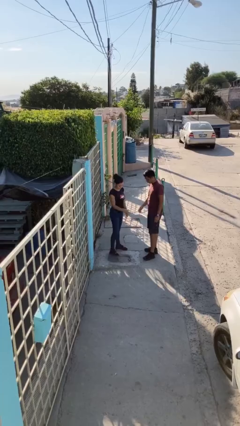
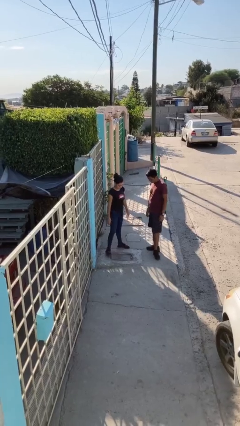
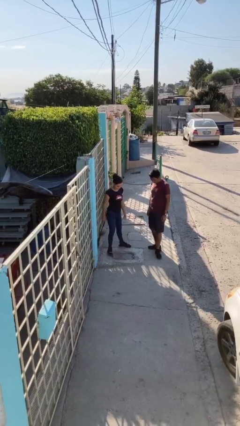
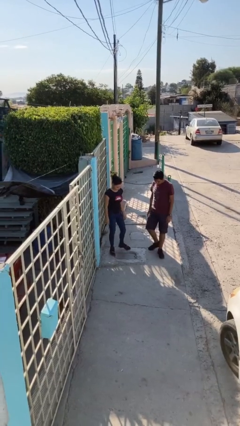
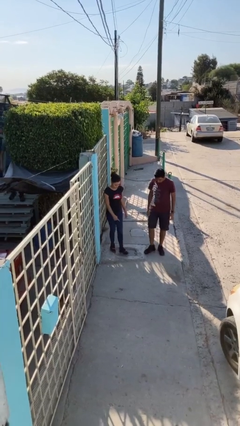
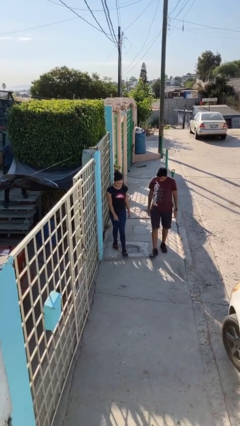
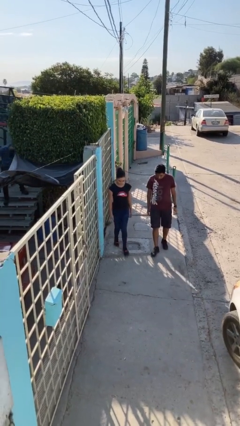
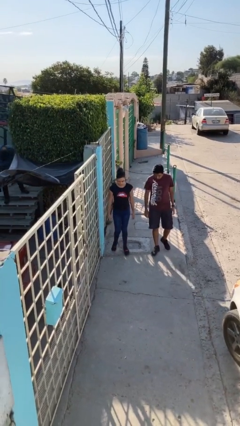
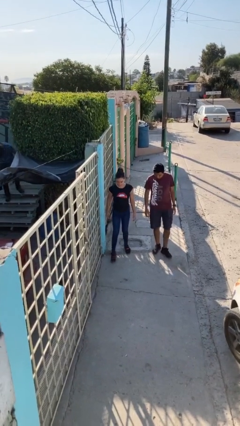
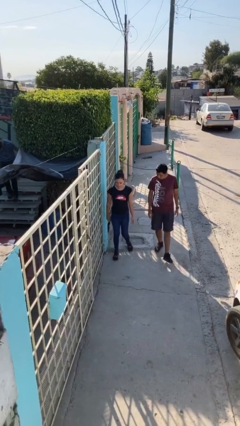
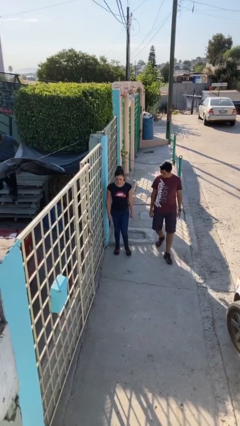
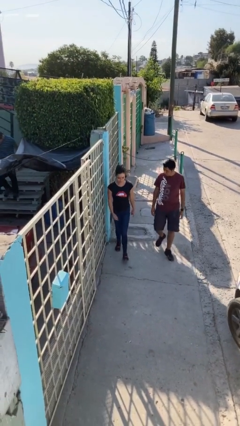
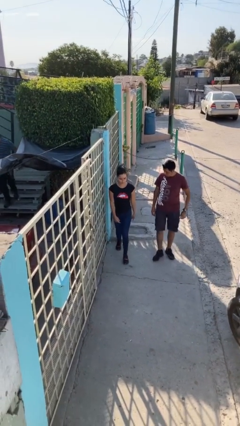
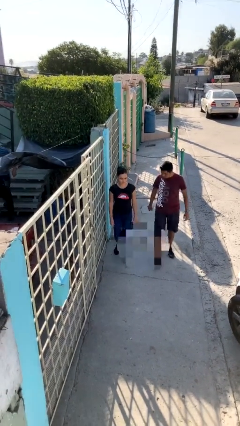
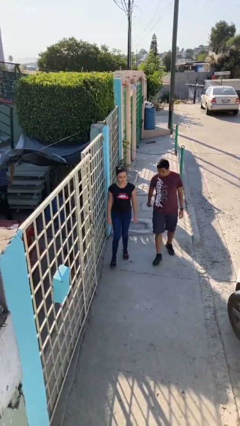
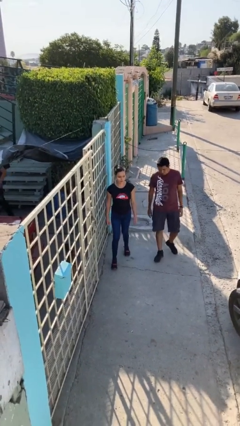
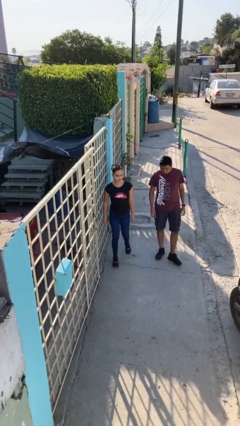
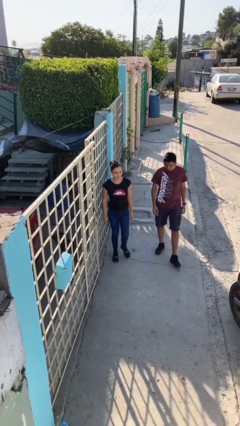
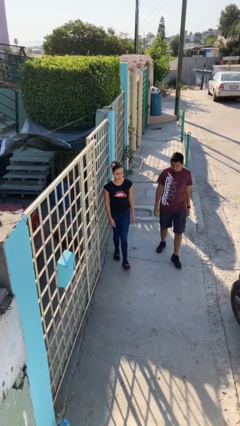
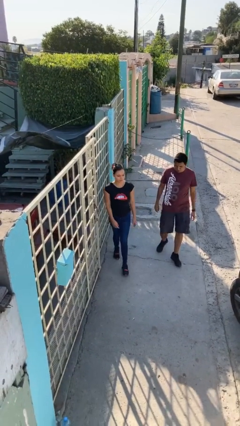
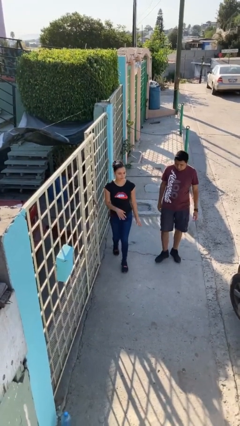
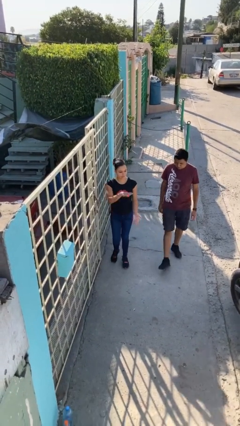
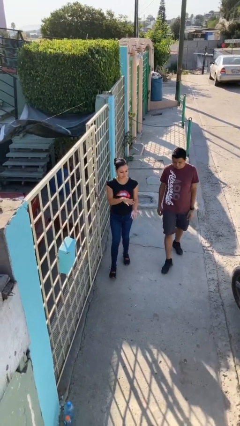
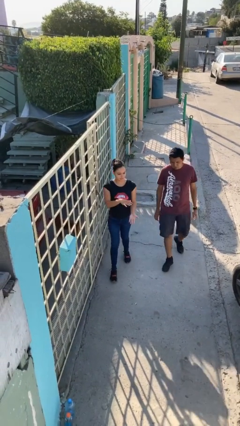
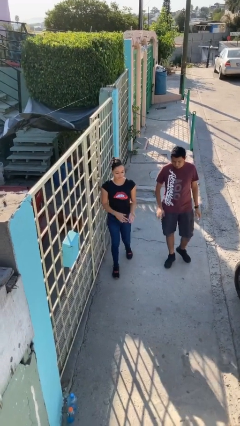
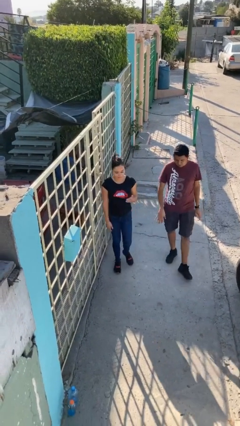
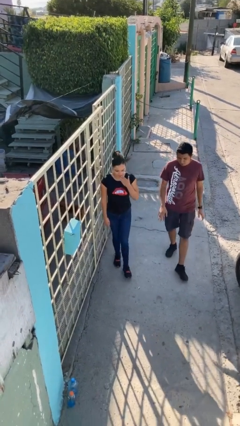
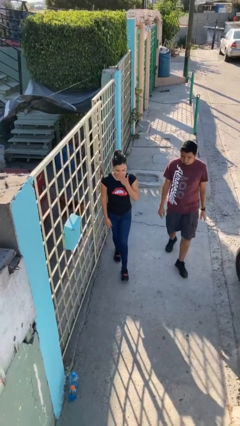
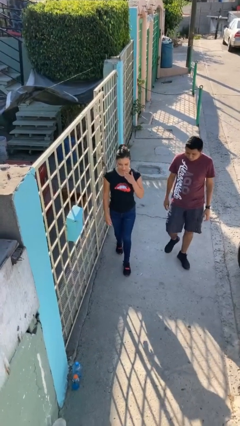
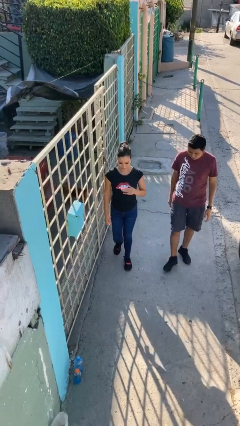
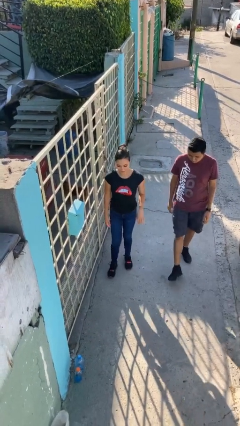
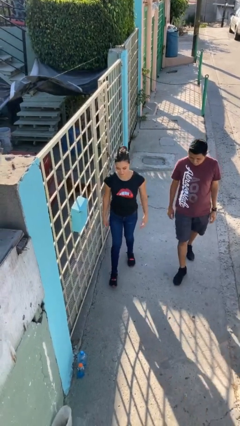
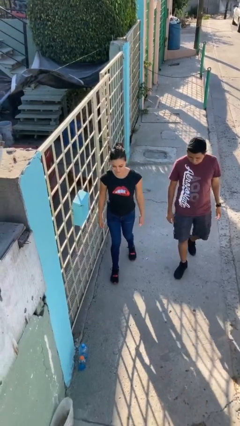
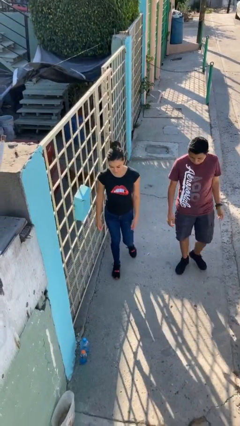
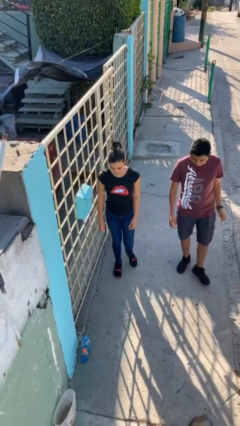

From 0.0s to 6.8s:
person talks to person

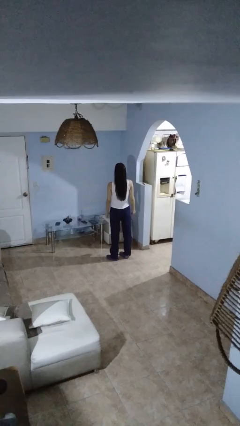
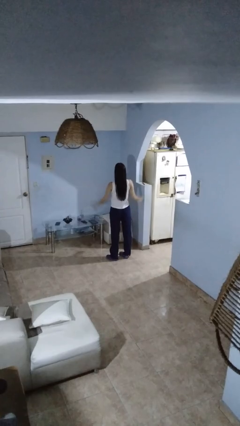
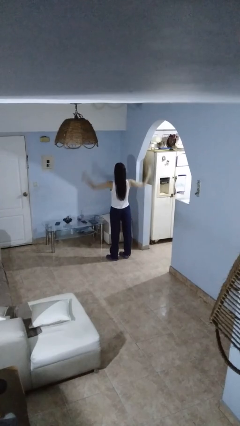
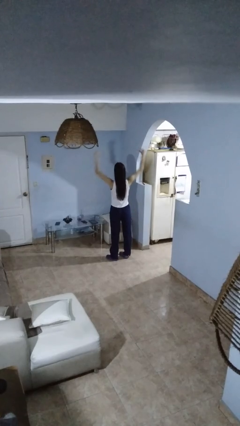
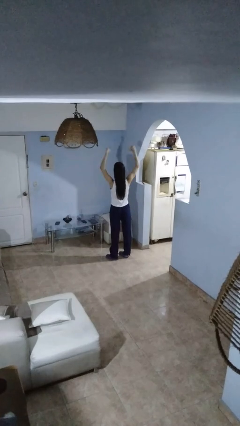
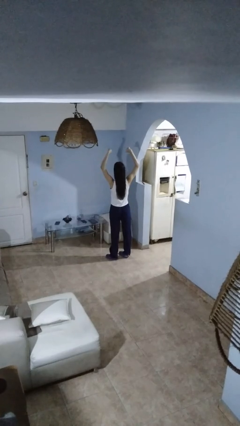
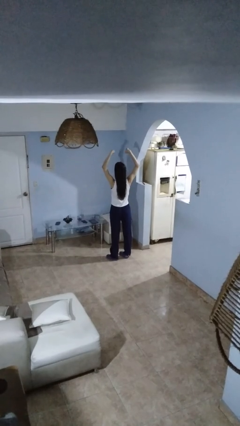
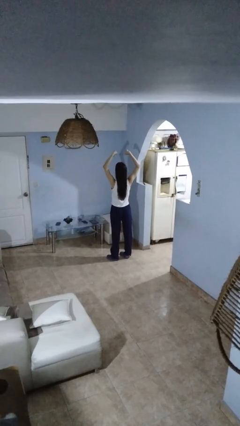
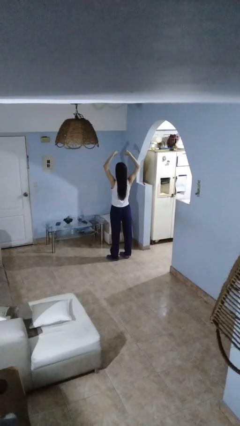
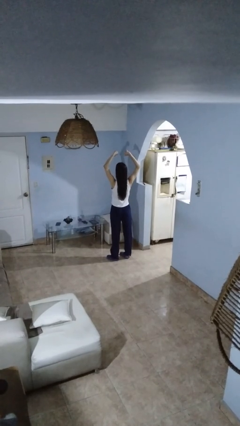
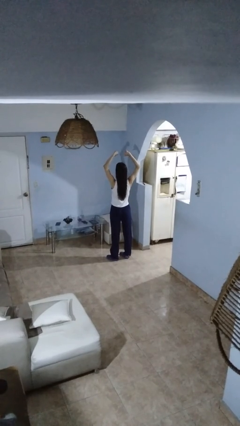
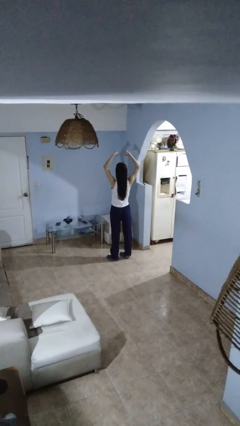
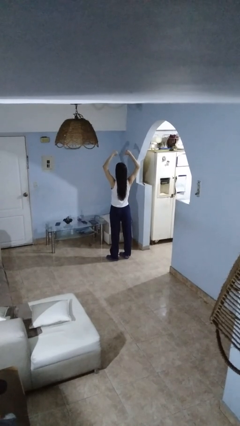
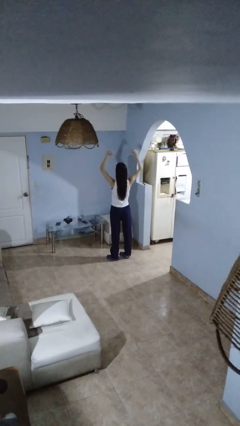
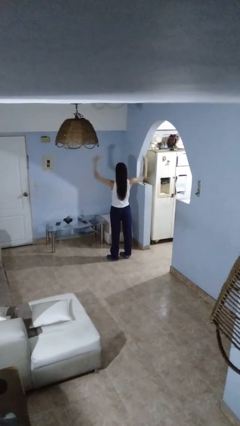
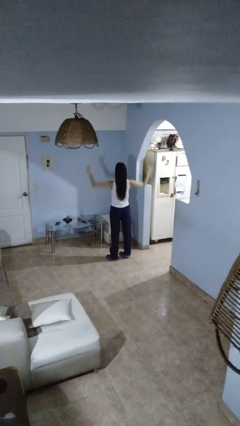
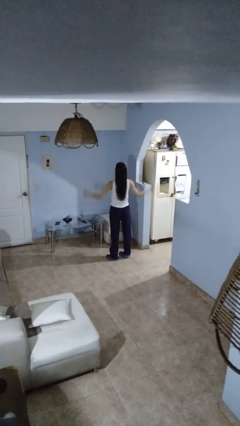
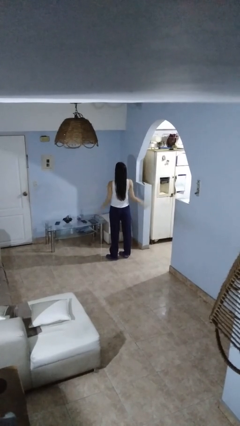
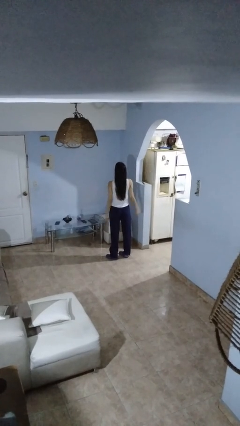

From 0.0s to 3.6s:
person gestures thumbs down

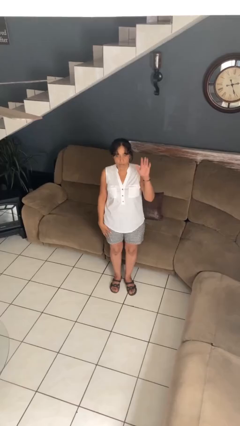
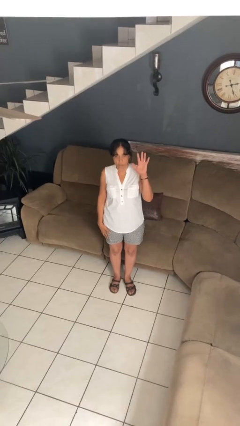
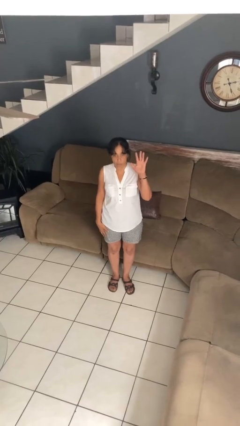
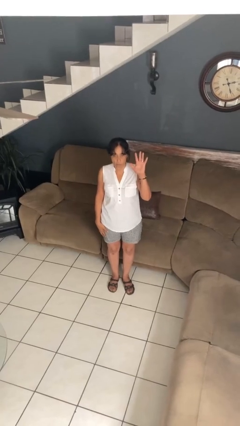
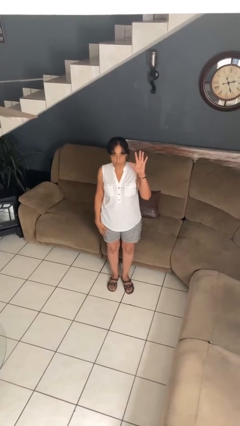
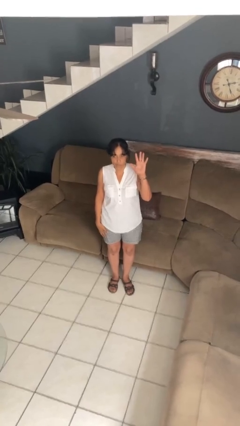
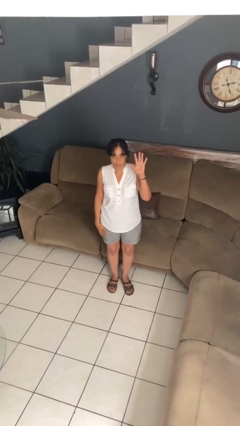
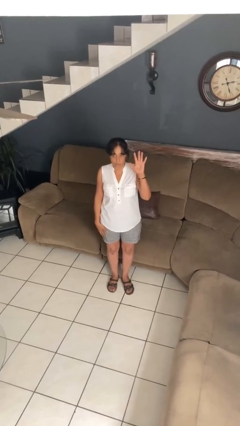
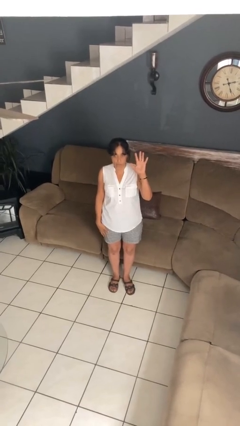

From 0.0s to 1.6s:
person gestures number five

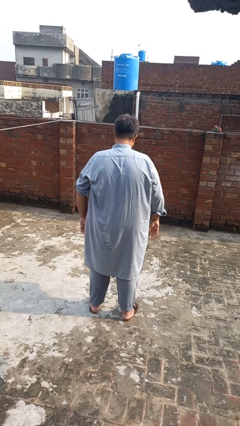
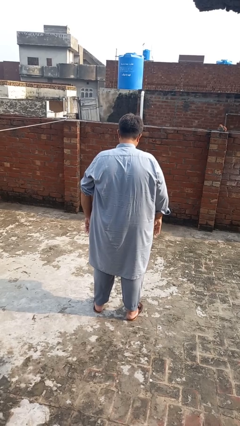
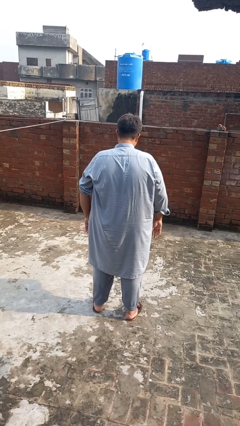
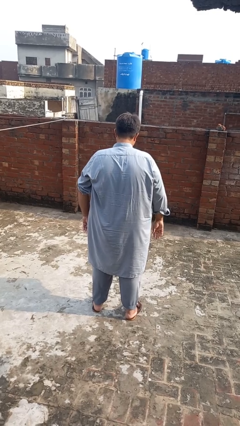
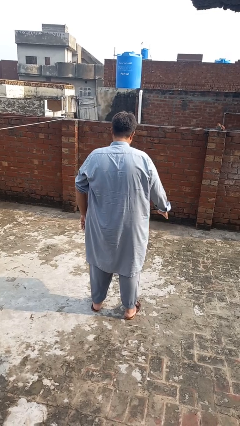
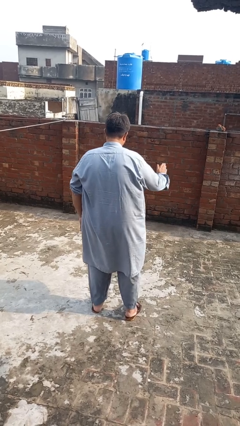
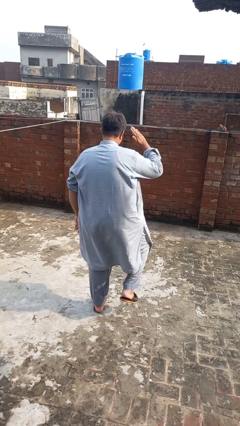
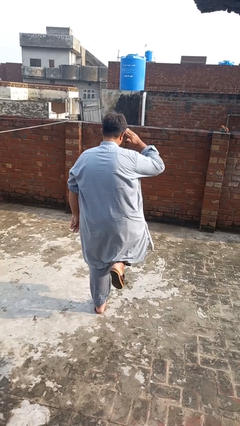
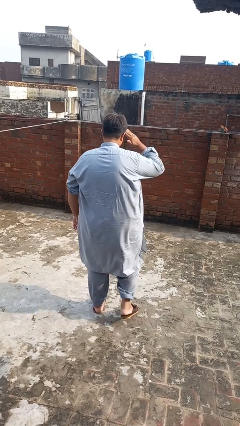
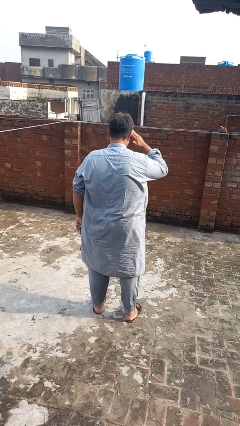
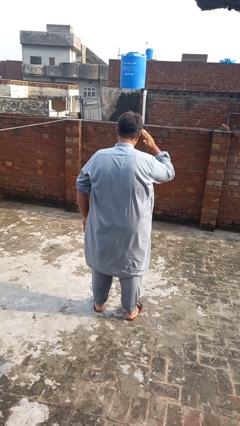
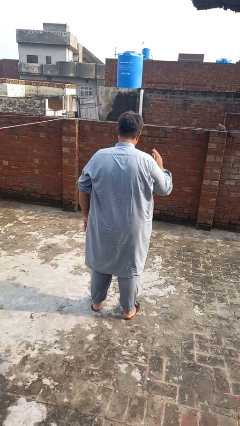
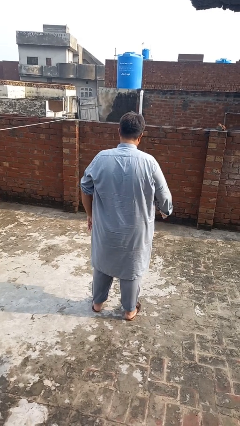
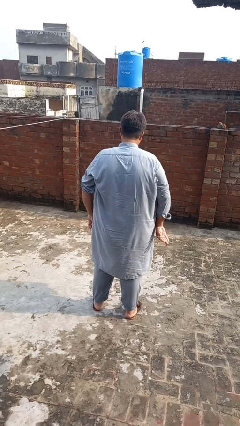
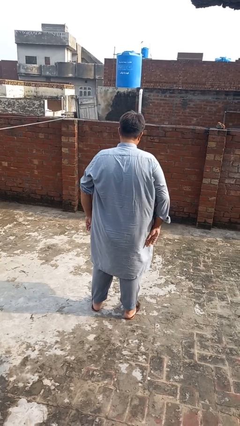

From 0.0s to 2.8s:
person salutes

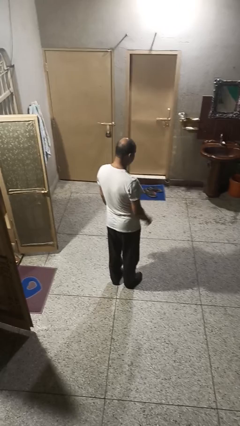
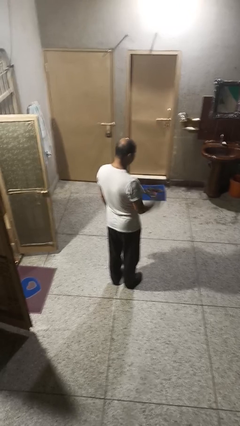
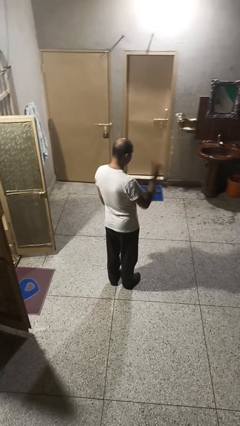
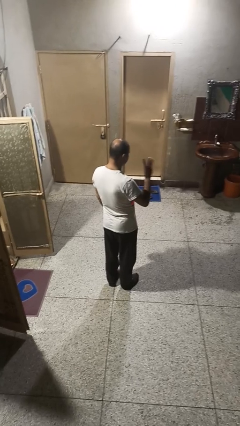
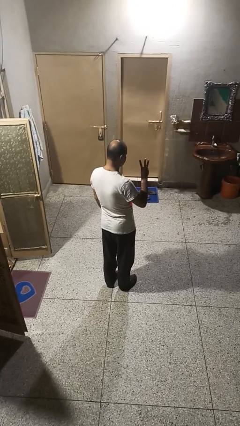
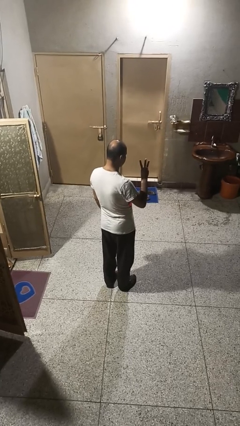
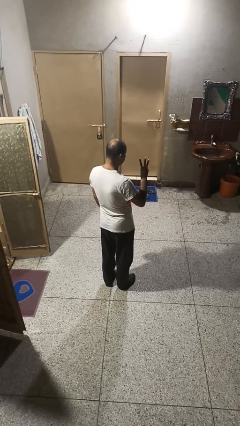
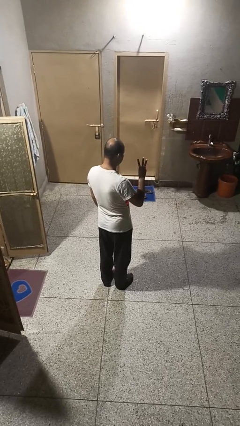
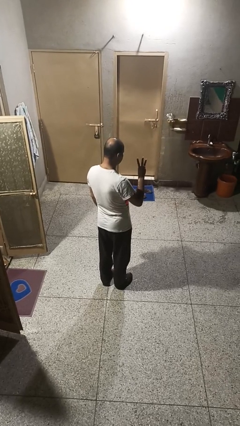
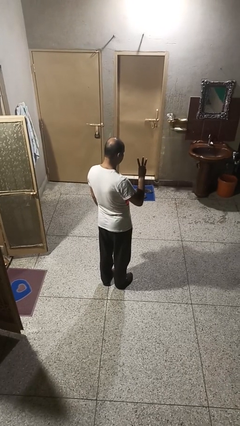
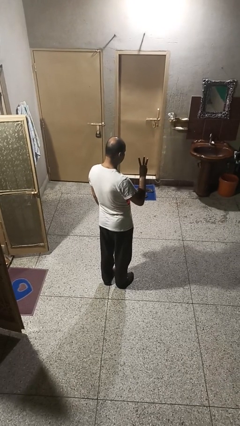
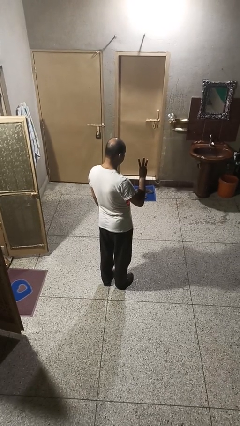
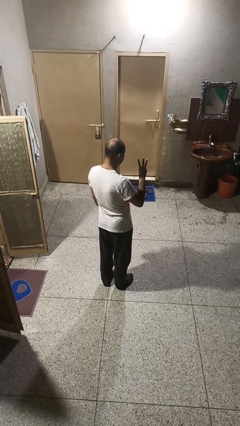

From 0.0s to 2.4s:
person gestures number three

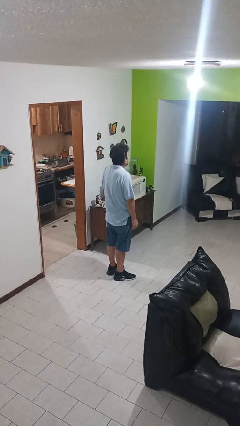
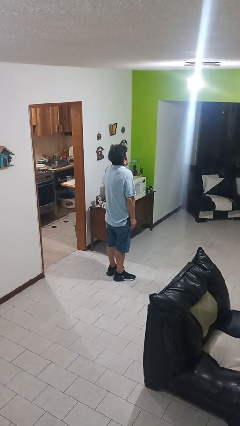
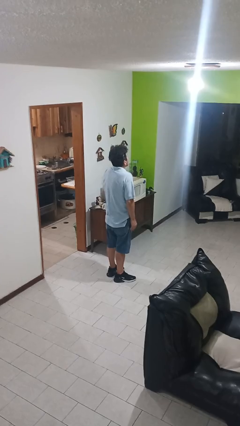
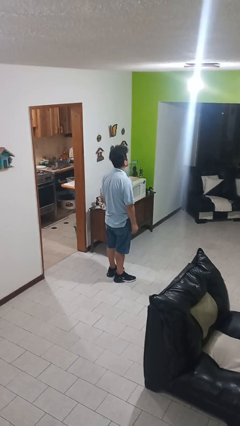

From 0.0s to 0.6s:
person shrugs
